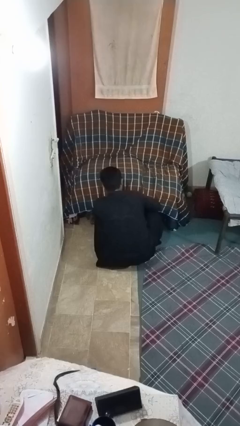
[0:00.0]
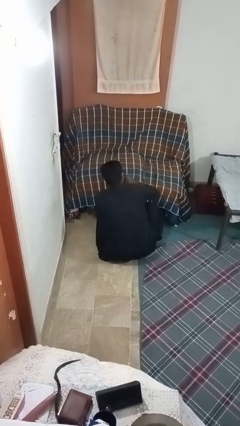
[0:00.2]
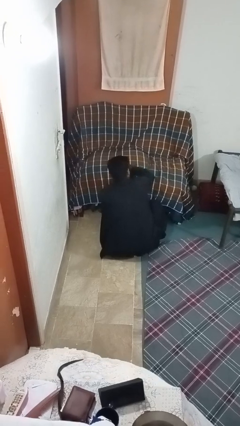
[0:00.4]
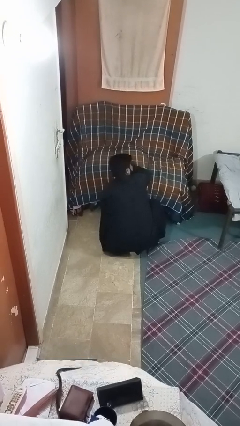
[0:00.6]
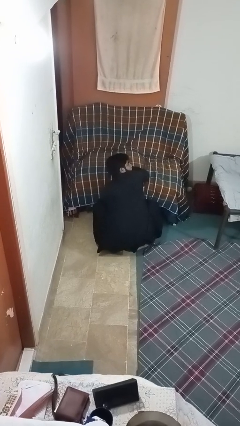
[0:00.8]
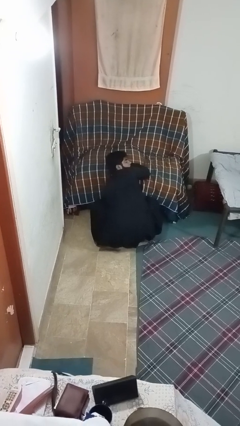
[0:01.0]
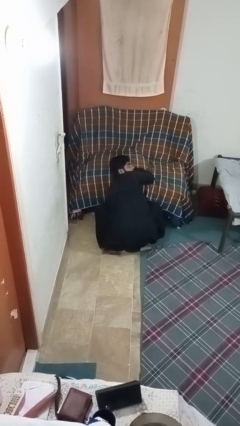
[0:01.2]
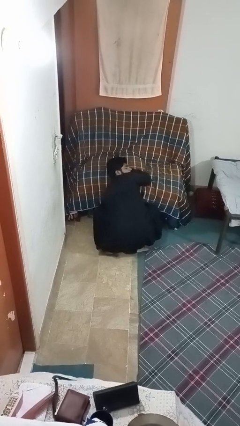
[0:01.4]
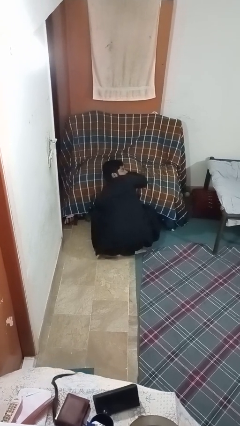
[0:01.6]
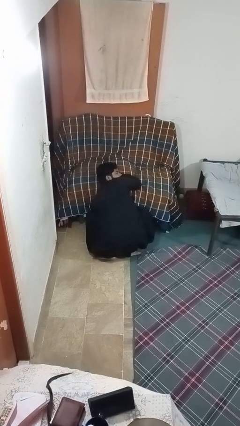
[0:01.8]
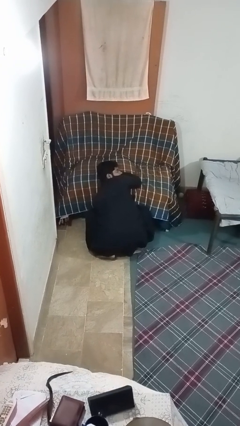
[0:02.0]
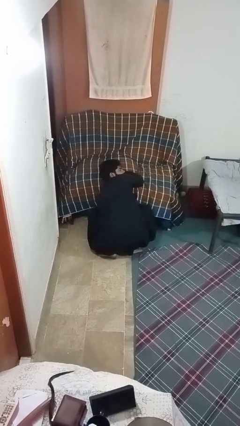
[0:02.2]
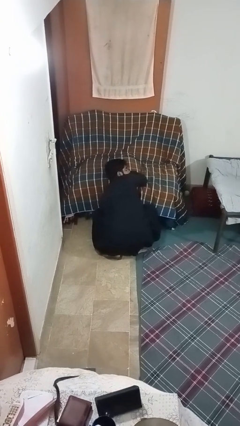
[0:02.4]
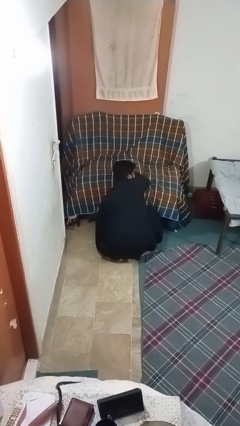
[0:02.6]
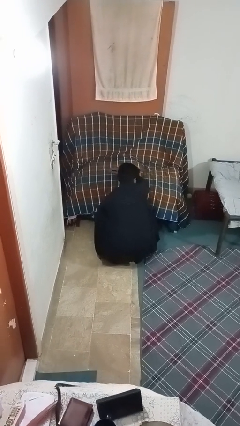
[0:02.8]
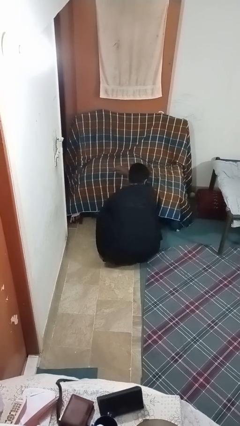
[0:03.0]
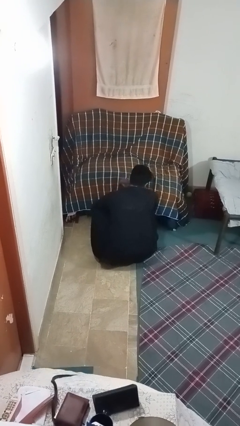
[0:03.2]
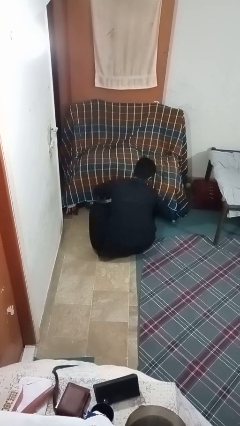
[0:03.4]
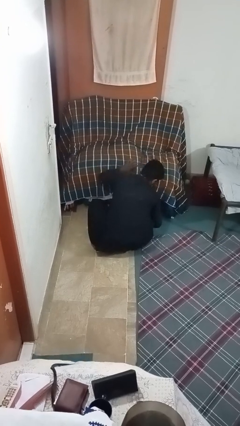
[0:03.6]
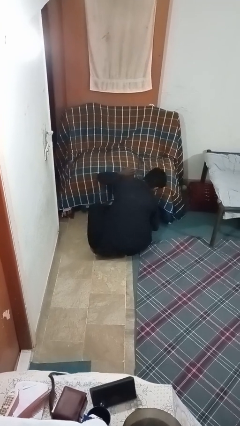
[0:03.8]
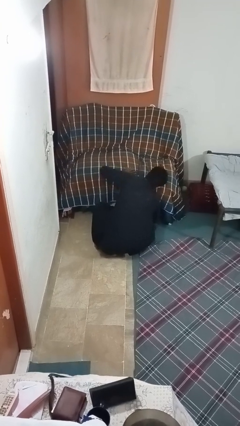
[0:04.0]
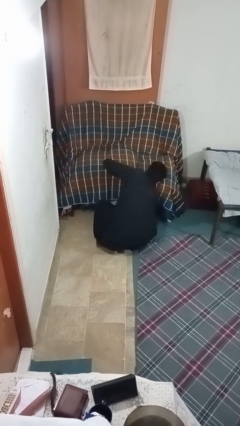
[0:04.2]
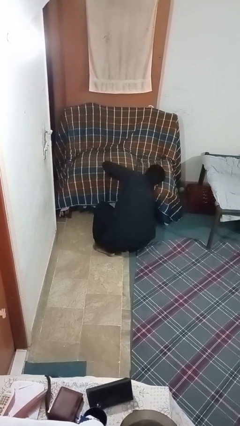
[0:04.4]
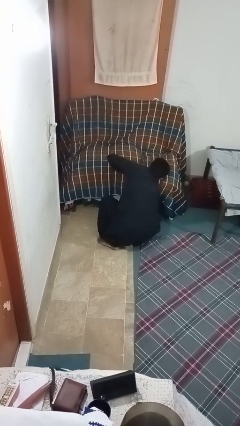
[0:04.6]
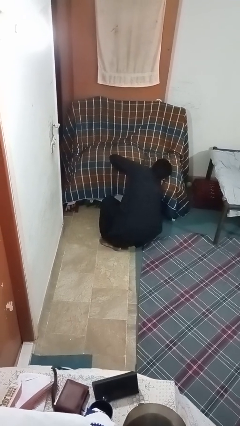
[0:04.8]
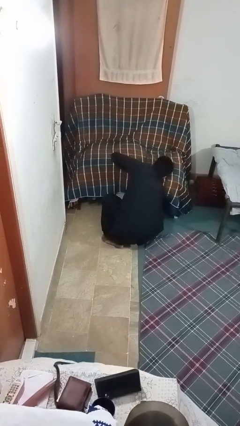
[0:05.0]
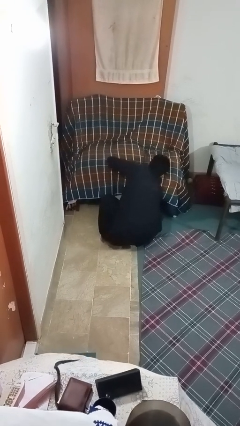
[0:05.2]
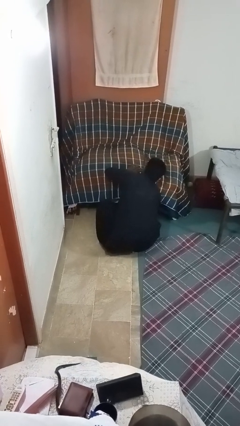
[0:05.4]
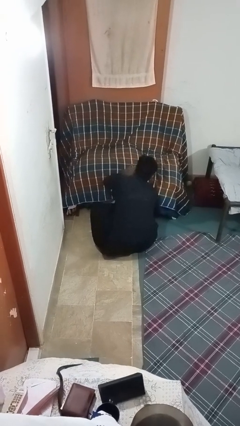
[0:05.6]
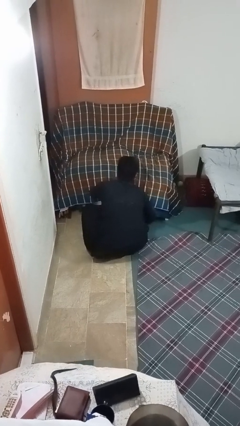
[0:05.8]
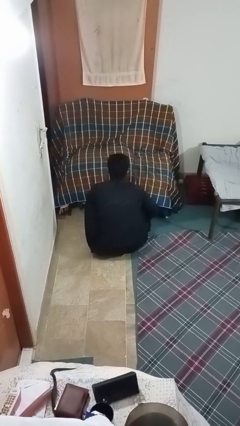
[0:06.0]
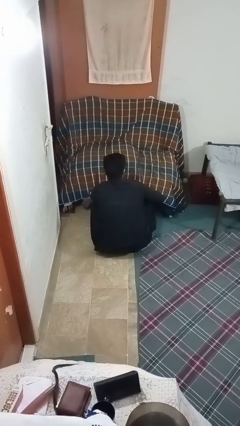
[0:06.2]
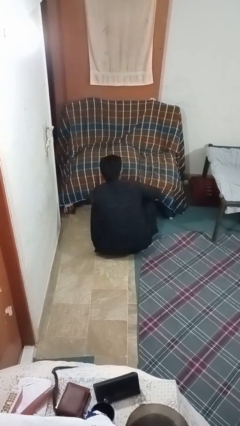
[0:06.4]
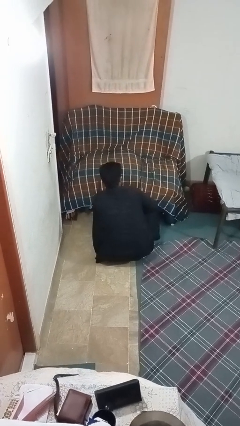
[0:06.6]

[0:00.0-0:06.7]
person searches under couch

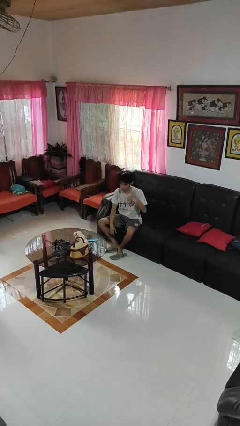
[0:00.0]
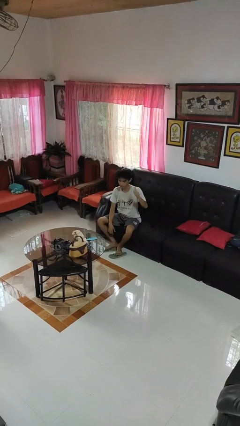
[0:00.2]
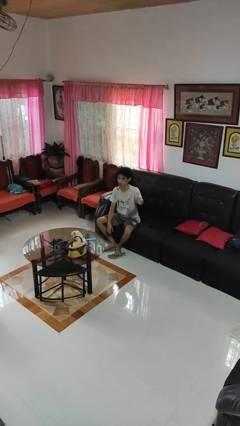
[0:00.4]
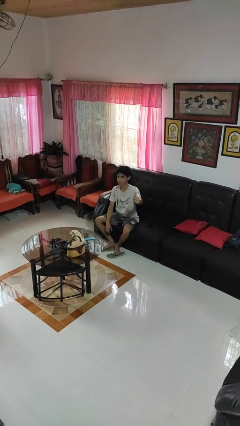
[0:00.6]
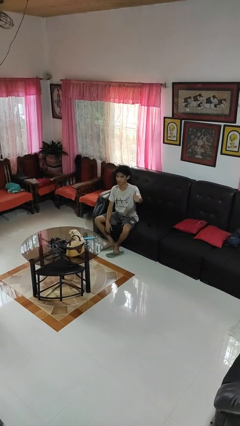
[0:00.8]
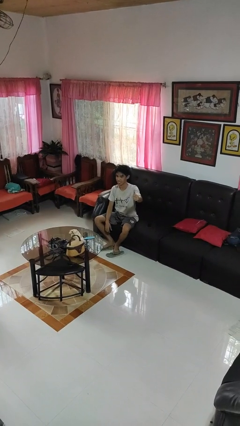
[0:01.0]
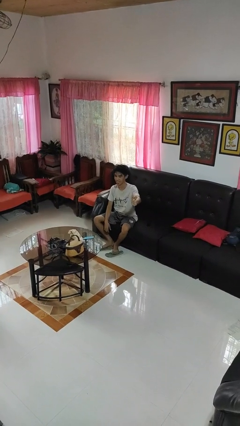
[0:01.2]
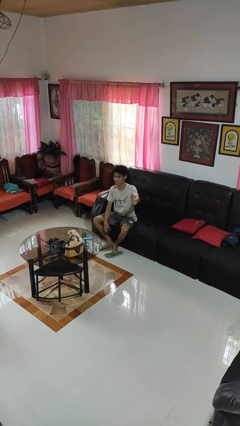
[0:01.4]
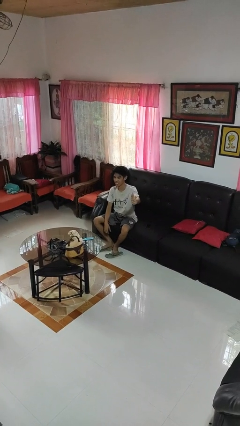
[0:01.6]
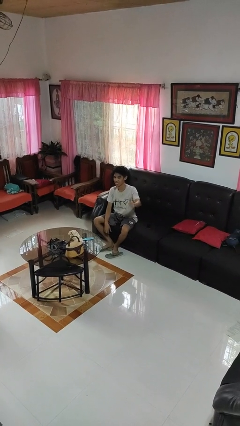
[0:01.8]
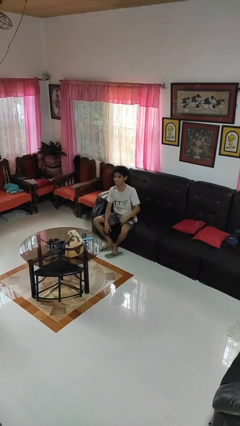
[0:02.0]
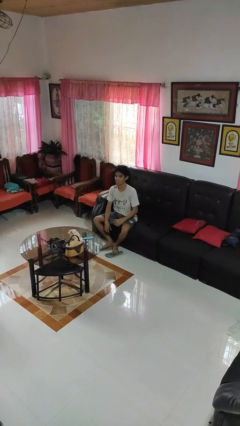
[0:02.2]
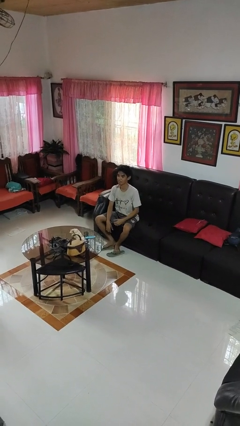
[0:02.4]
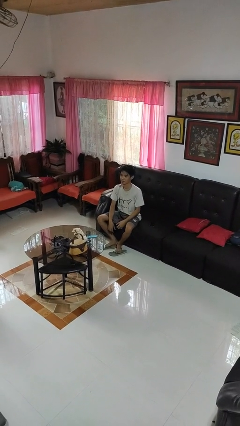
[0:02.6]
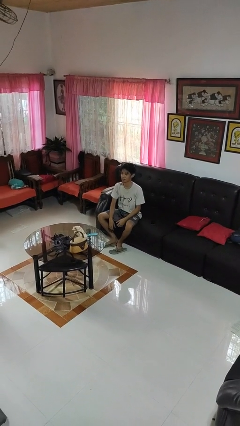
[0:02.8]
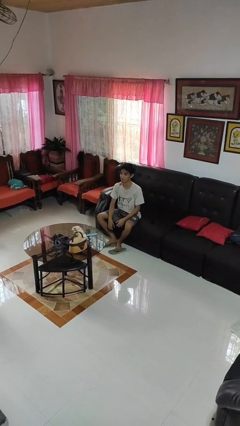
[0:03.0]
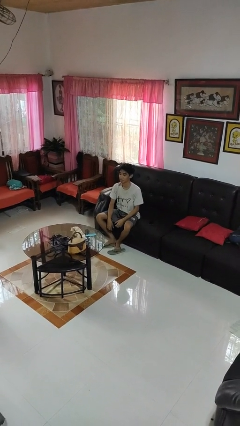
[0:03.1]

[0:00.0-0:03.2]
person gestures thumbs up

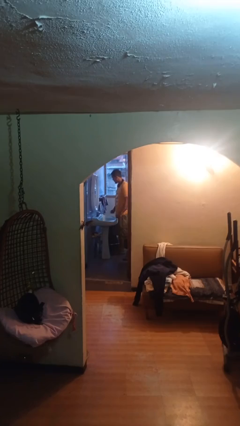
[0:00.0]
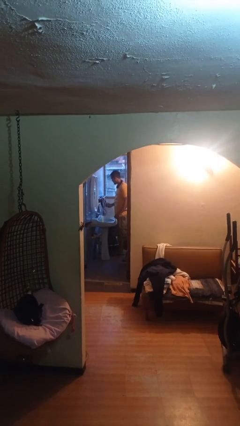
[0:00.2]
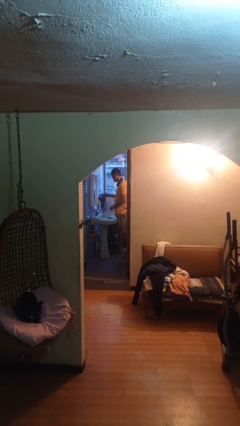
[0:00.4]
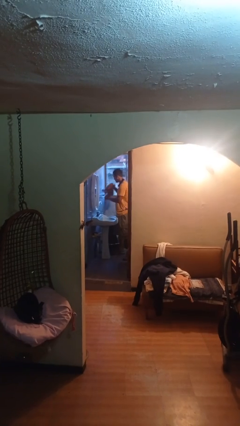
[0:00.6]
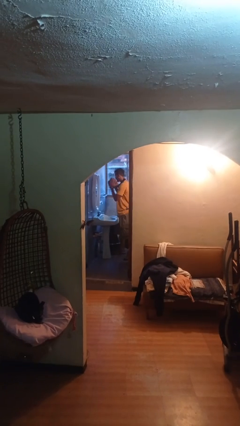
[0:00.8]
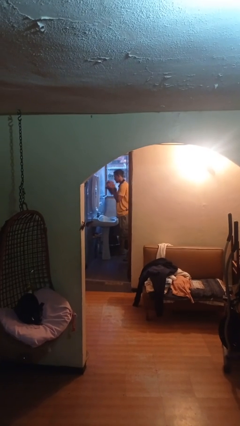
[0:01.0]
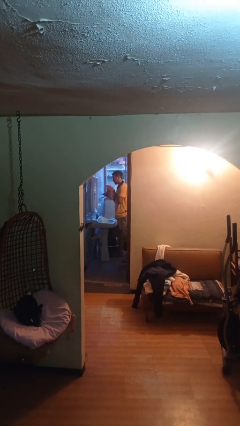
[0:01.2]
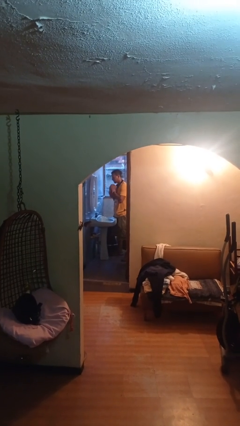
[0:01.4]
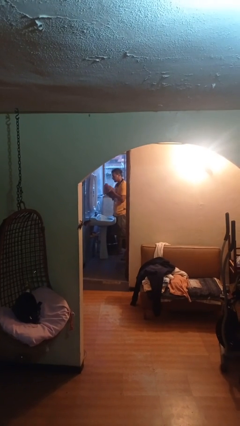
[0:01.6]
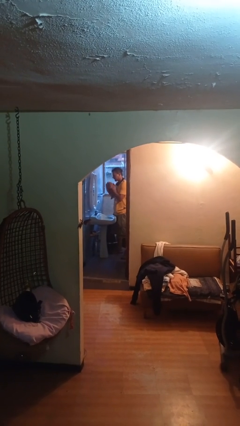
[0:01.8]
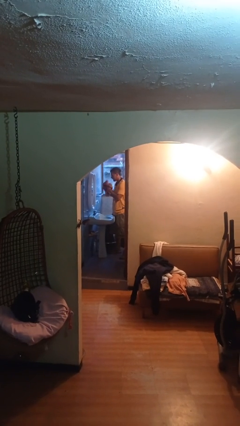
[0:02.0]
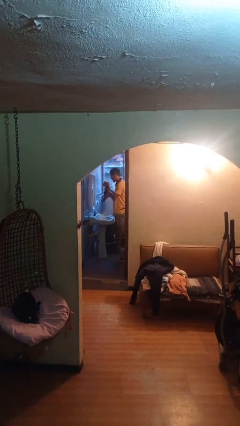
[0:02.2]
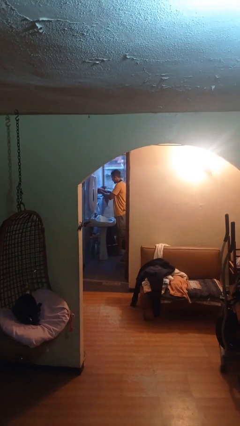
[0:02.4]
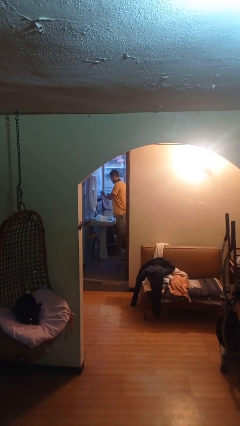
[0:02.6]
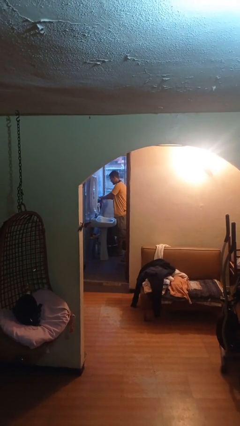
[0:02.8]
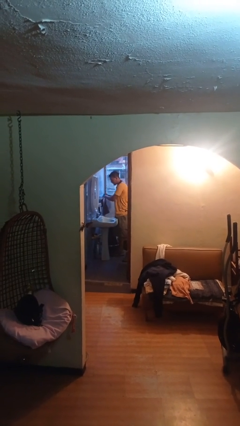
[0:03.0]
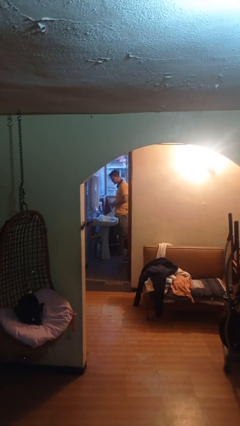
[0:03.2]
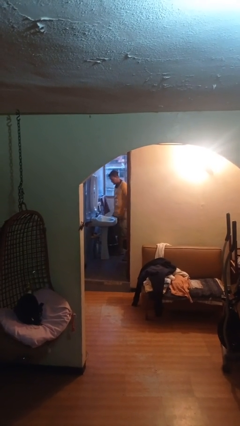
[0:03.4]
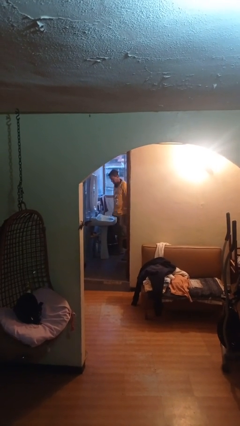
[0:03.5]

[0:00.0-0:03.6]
person dries hands with towel

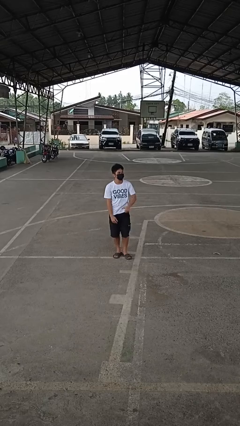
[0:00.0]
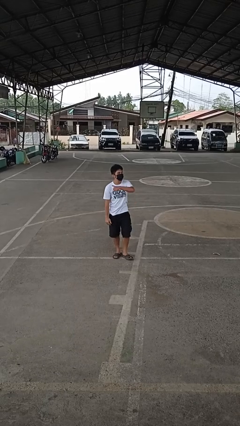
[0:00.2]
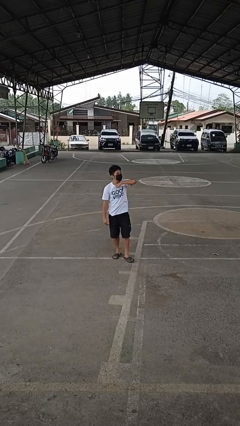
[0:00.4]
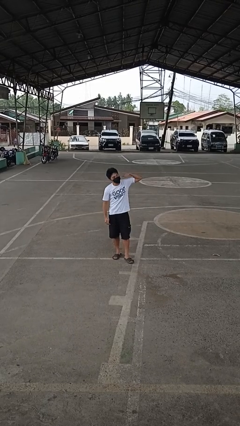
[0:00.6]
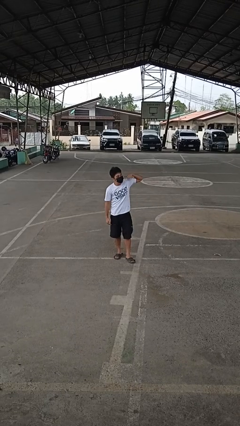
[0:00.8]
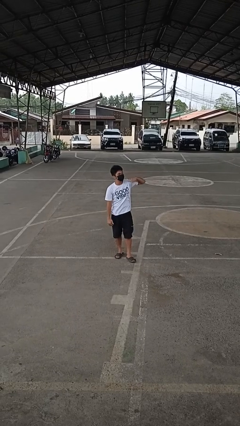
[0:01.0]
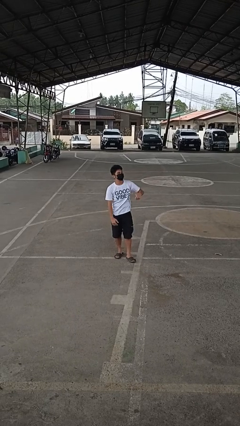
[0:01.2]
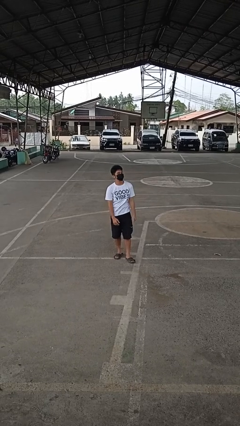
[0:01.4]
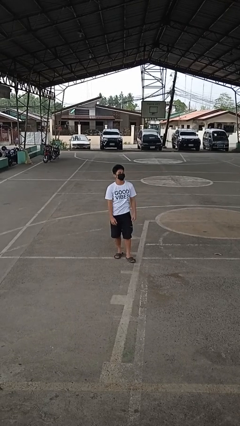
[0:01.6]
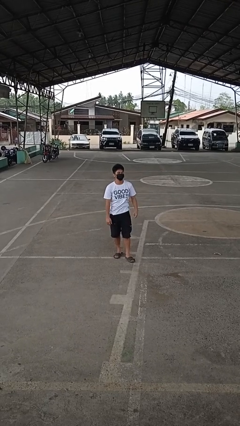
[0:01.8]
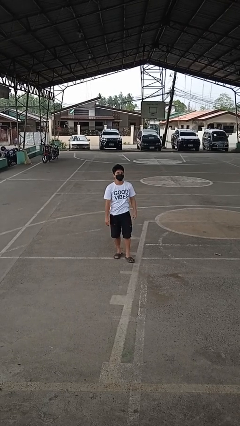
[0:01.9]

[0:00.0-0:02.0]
person gestures cut

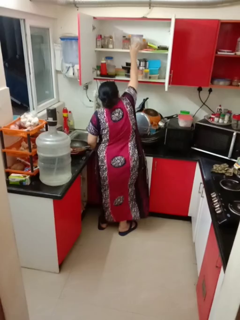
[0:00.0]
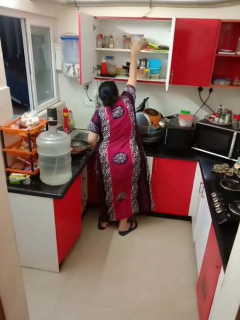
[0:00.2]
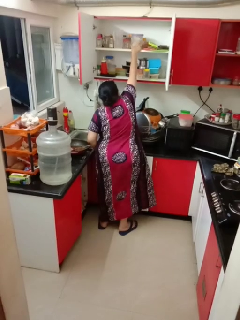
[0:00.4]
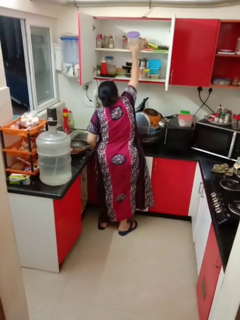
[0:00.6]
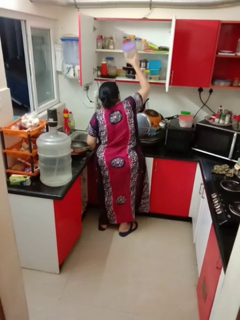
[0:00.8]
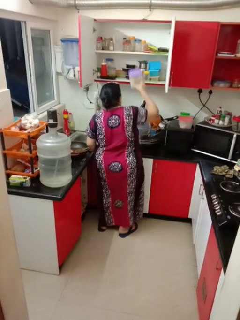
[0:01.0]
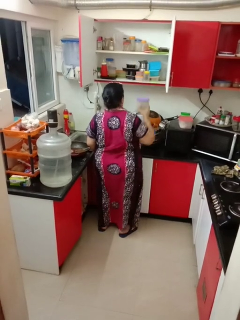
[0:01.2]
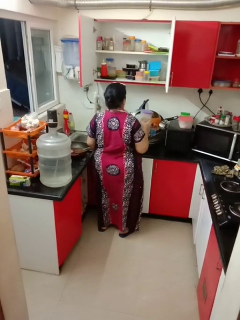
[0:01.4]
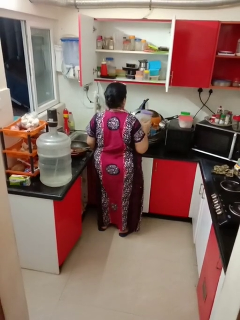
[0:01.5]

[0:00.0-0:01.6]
person takes object from cabinet

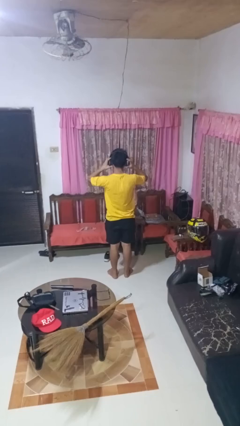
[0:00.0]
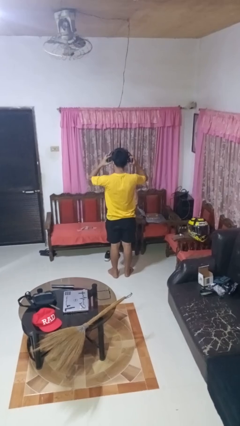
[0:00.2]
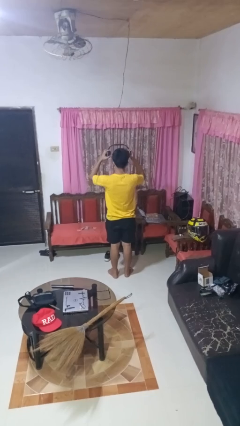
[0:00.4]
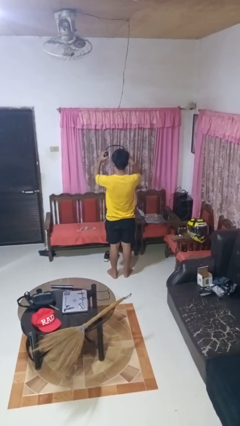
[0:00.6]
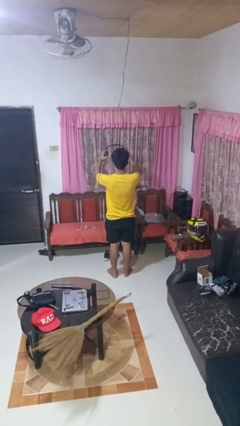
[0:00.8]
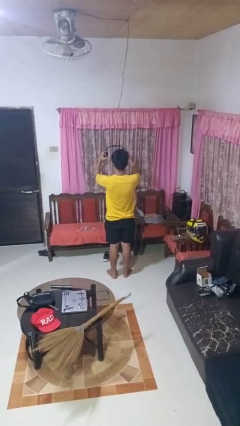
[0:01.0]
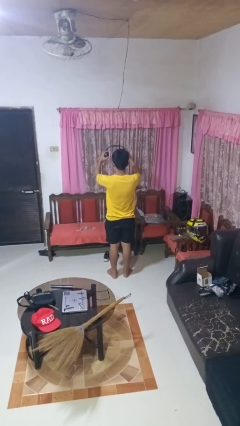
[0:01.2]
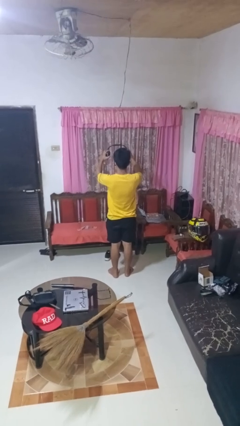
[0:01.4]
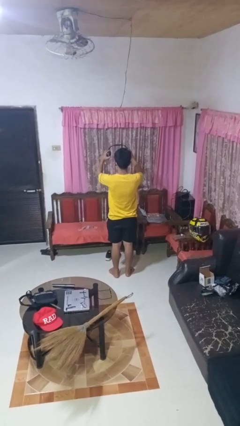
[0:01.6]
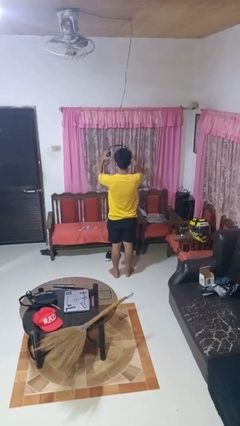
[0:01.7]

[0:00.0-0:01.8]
person takes off headphones
